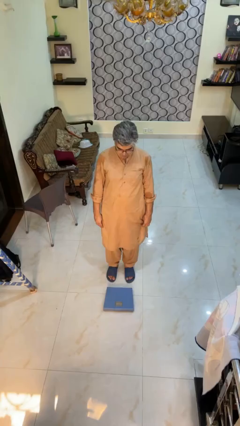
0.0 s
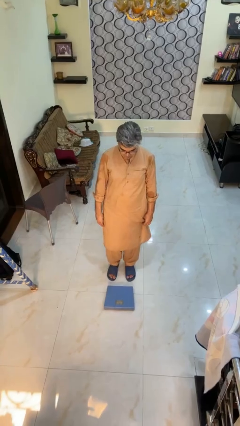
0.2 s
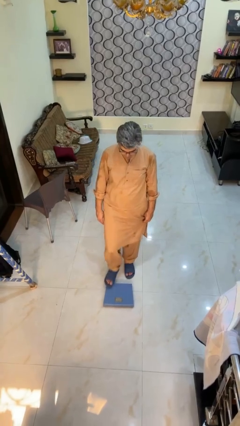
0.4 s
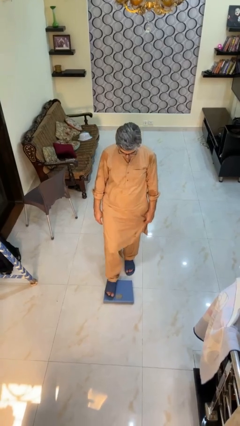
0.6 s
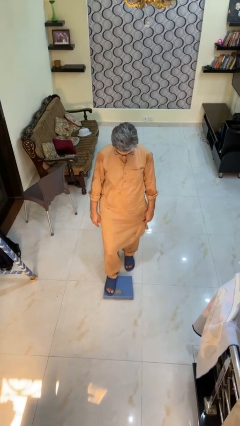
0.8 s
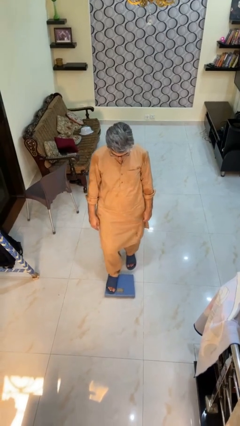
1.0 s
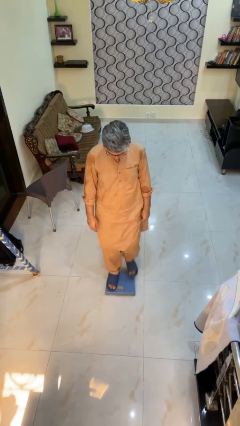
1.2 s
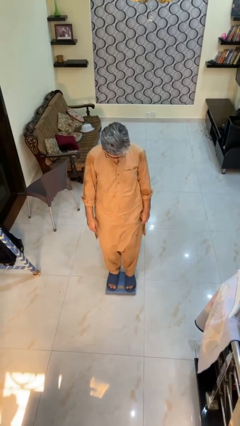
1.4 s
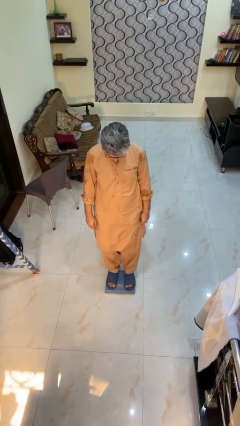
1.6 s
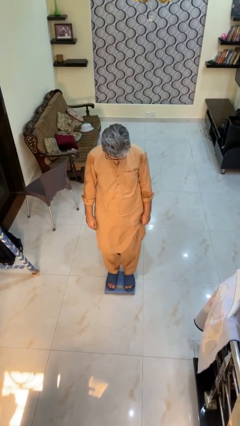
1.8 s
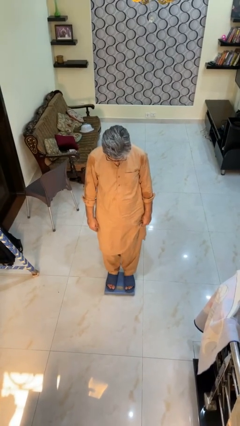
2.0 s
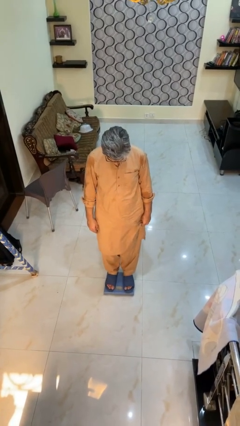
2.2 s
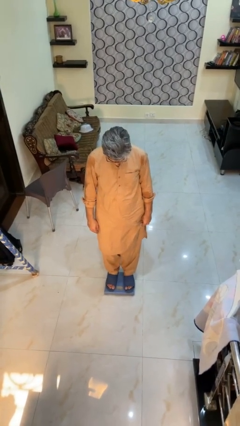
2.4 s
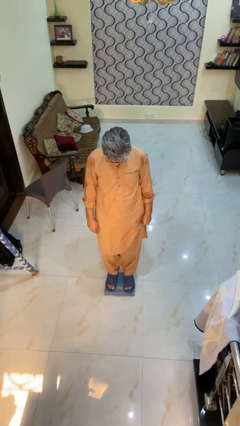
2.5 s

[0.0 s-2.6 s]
person uses bodyweight scale

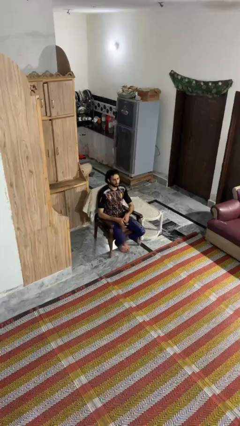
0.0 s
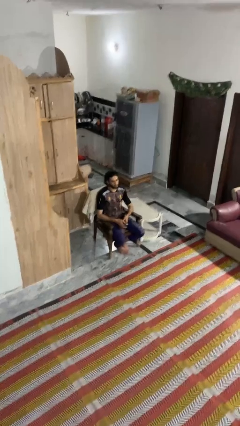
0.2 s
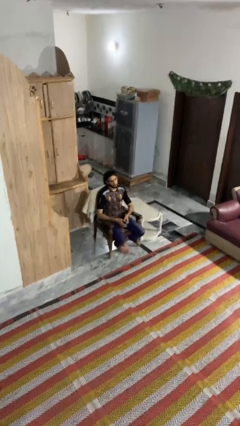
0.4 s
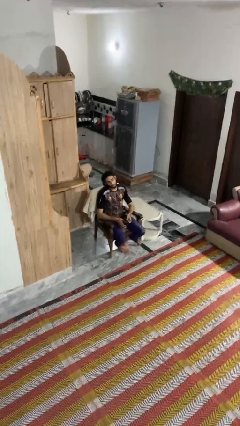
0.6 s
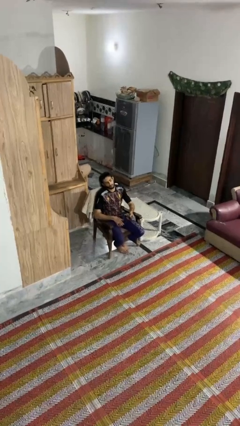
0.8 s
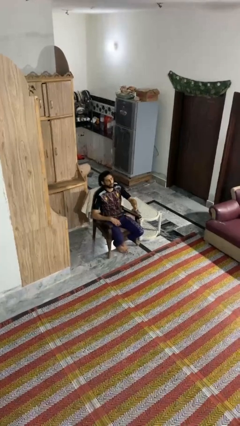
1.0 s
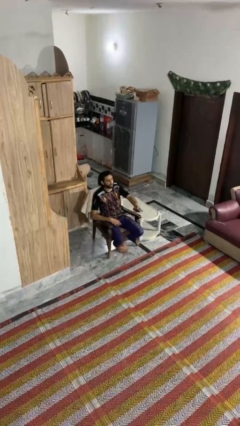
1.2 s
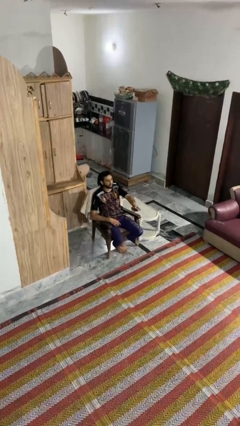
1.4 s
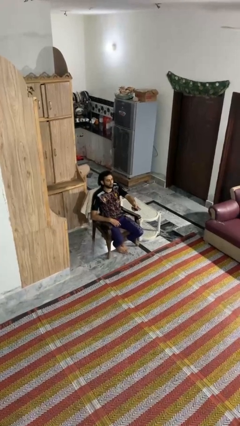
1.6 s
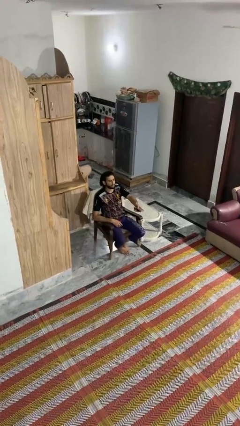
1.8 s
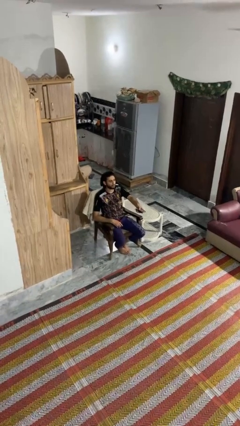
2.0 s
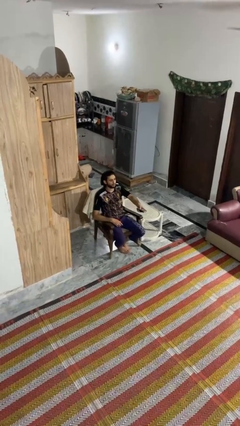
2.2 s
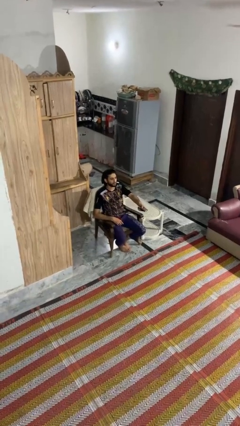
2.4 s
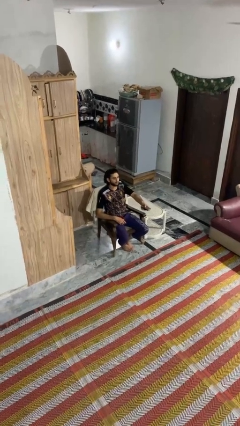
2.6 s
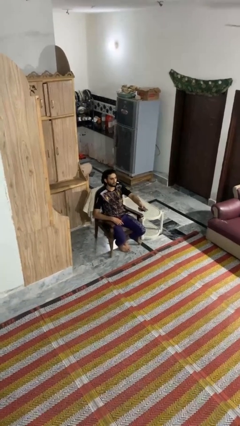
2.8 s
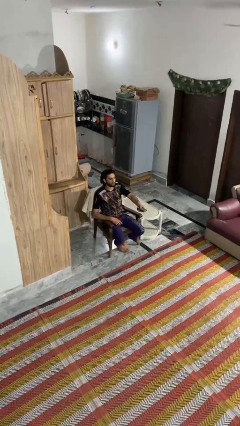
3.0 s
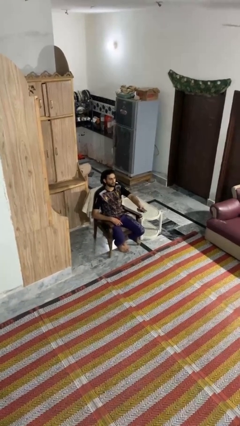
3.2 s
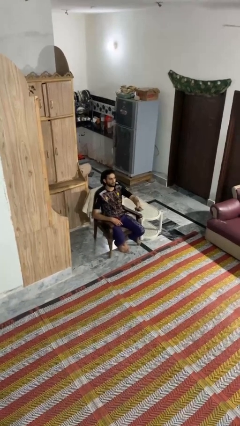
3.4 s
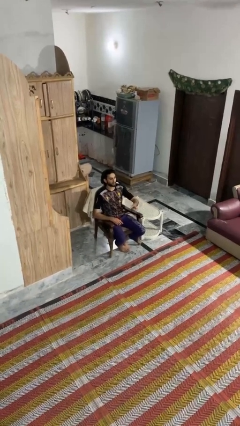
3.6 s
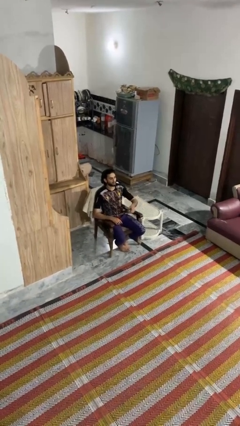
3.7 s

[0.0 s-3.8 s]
person uses television remote

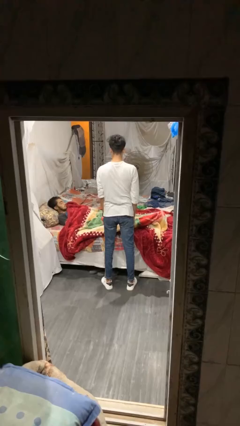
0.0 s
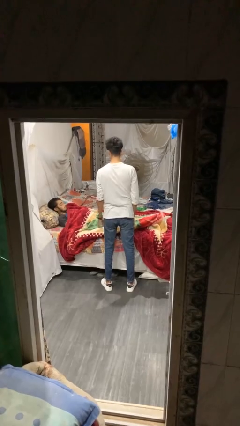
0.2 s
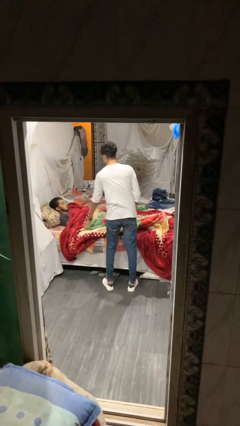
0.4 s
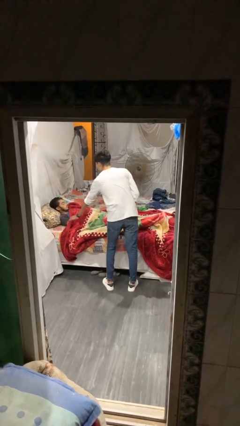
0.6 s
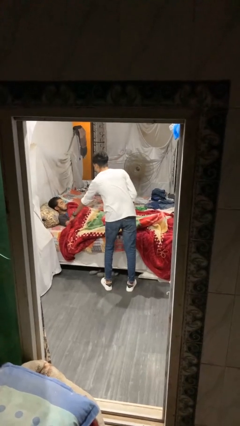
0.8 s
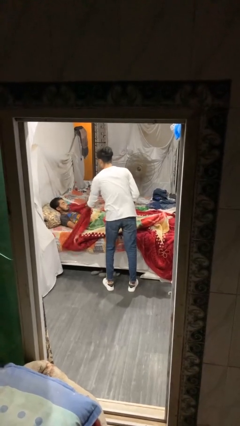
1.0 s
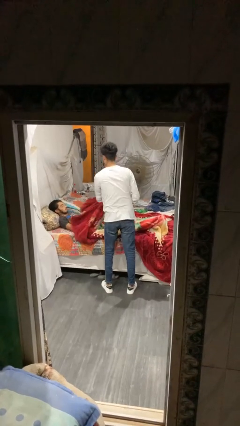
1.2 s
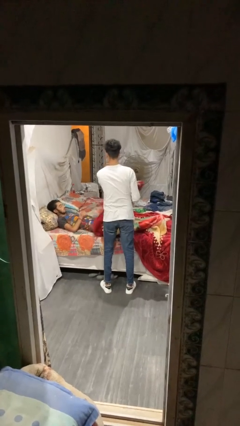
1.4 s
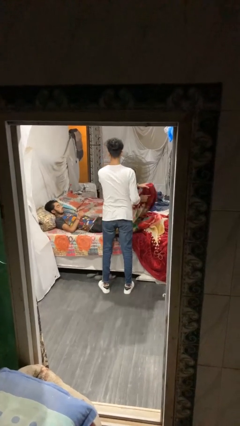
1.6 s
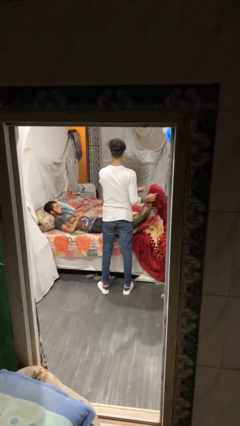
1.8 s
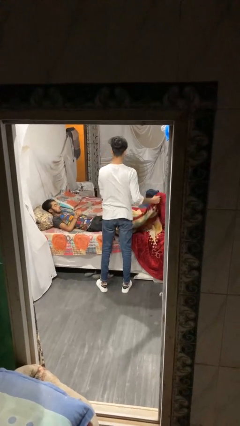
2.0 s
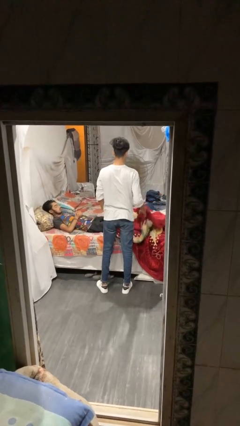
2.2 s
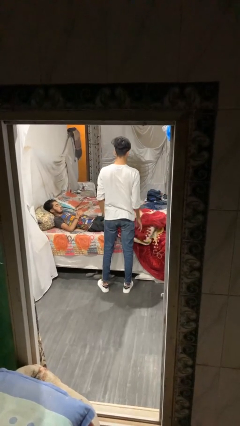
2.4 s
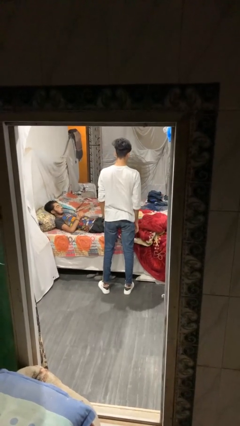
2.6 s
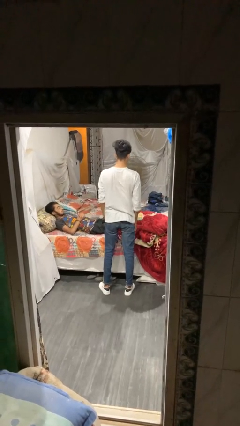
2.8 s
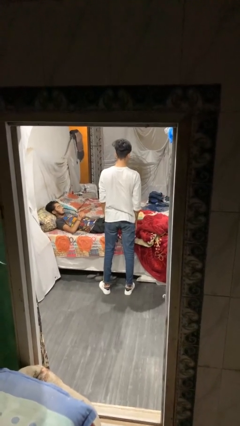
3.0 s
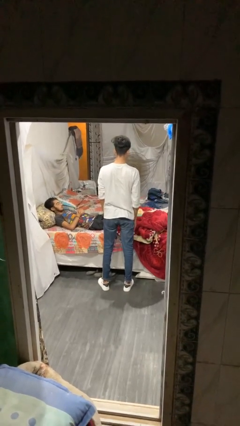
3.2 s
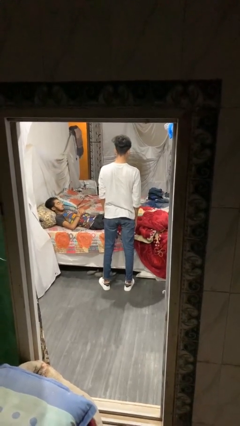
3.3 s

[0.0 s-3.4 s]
person uncovers friend with blanket

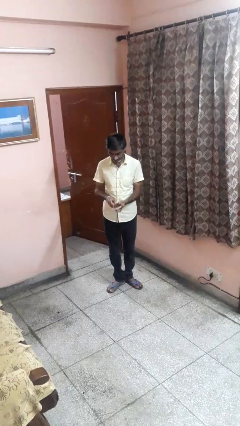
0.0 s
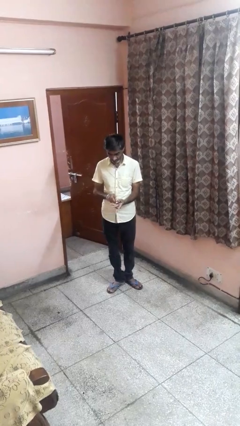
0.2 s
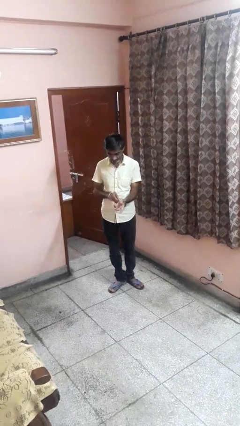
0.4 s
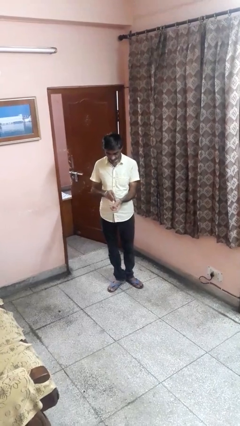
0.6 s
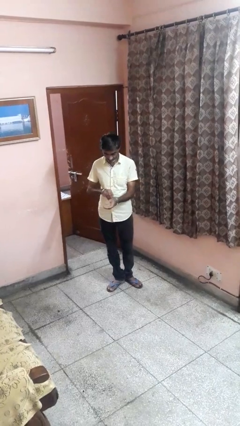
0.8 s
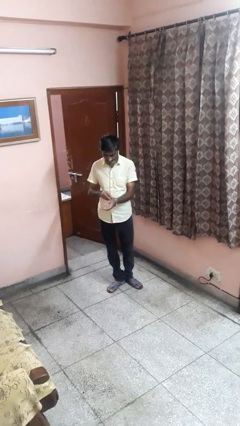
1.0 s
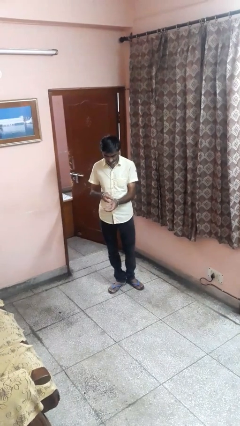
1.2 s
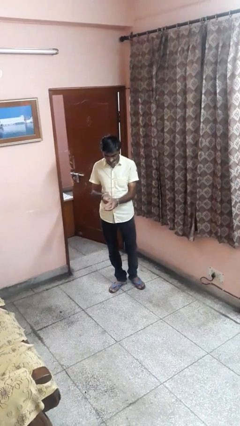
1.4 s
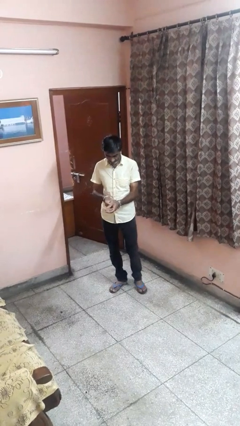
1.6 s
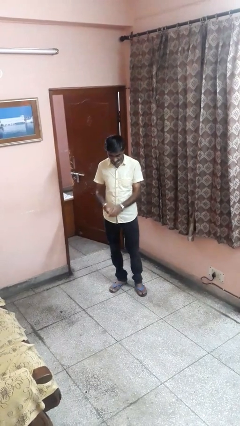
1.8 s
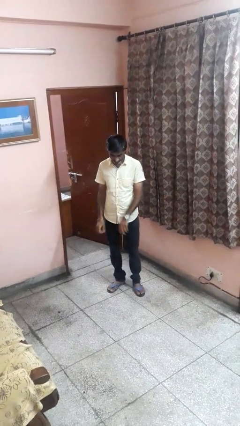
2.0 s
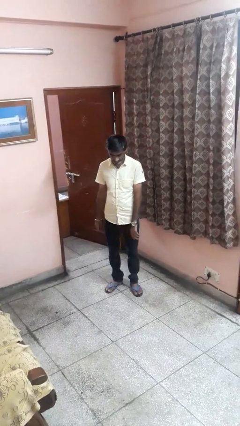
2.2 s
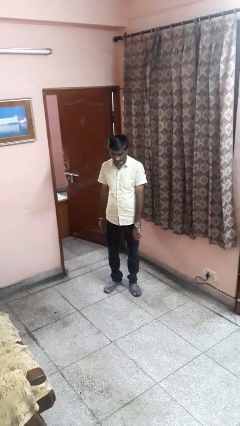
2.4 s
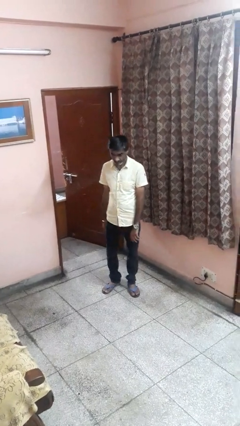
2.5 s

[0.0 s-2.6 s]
person puts on wristwatch

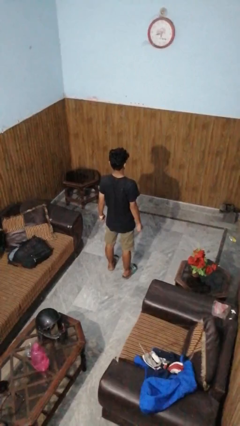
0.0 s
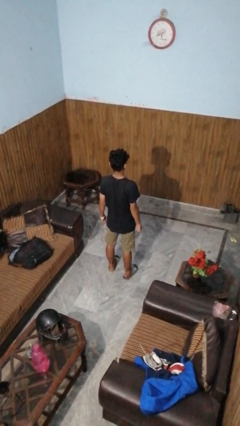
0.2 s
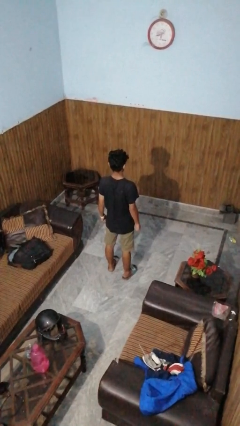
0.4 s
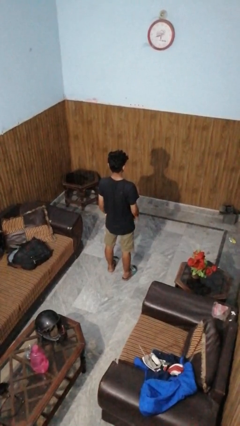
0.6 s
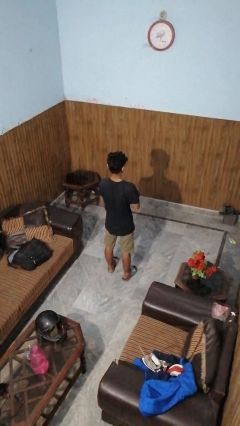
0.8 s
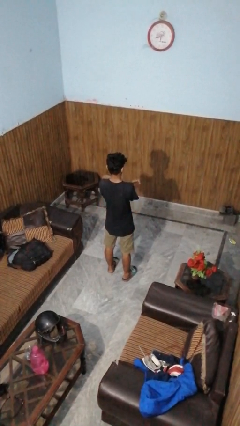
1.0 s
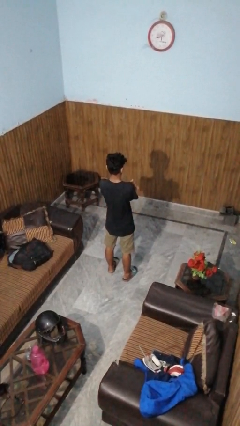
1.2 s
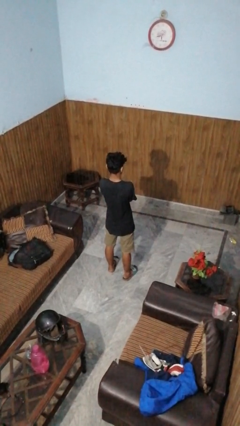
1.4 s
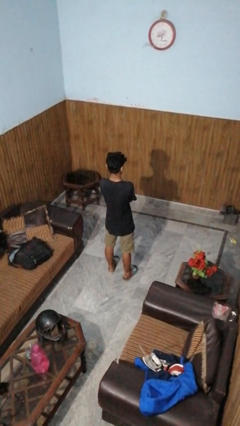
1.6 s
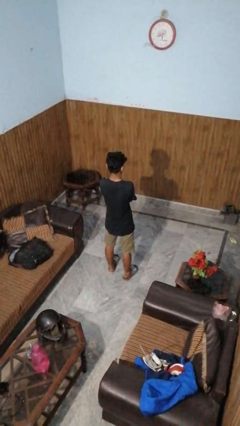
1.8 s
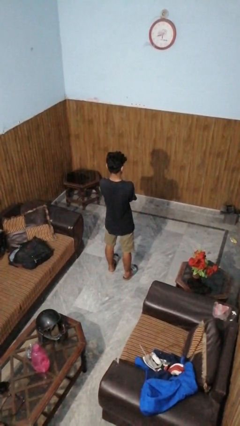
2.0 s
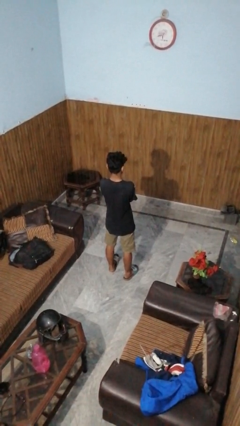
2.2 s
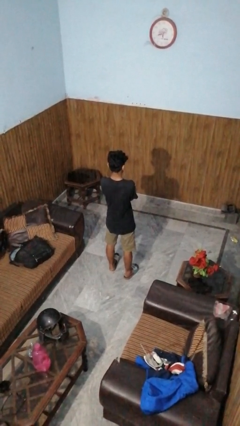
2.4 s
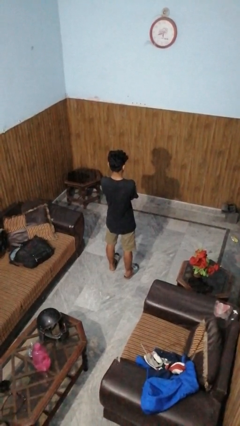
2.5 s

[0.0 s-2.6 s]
person crosses arms

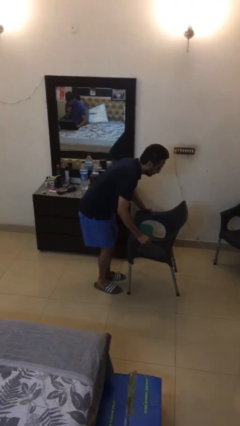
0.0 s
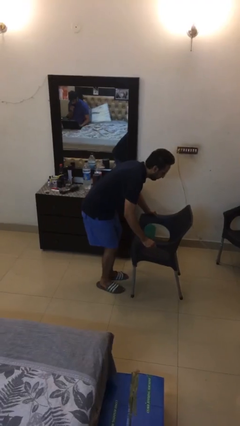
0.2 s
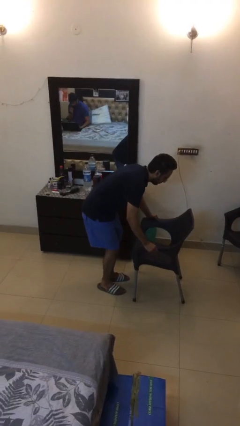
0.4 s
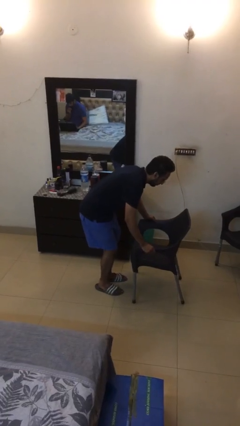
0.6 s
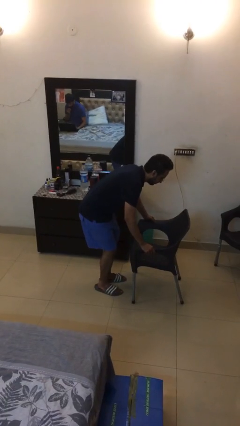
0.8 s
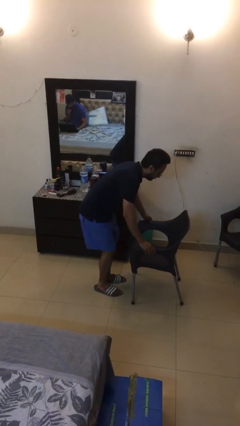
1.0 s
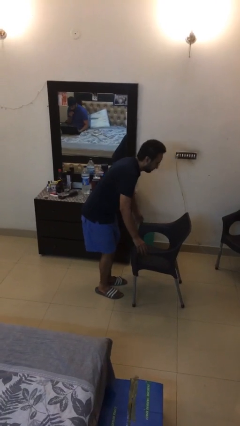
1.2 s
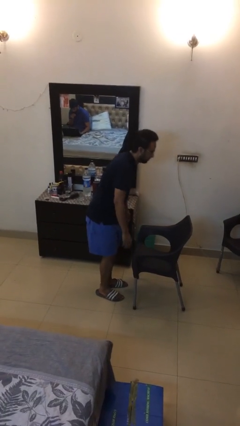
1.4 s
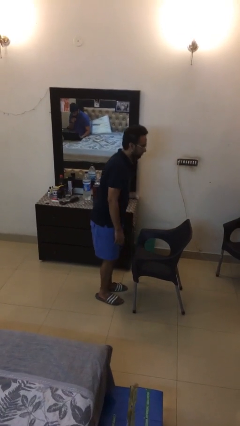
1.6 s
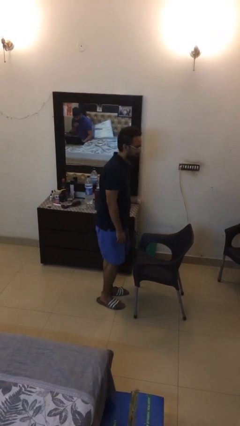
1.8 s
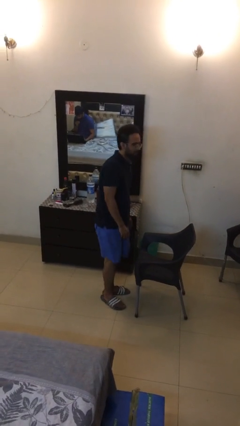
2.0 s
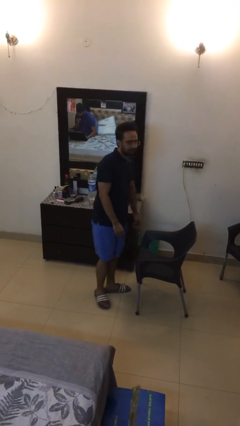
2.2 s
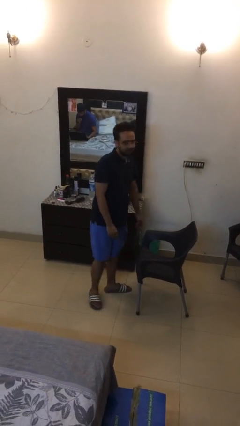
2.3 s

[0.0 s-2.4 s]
person puts down object on floor

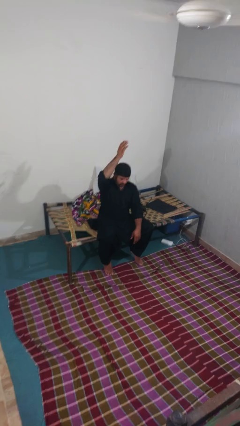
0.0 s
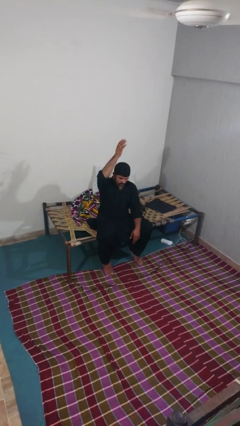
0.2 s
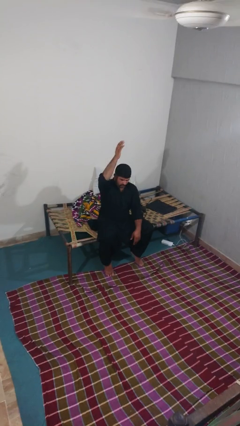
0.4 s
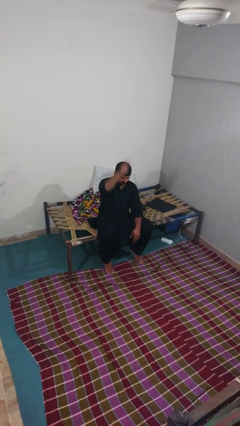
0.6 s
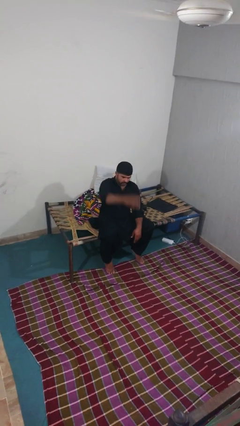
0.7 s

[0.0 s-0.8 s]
person gestures swipe down
